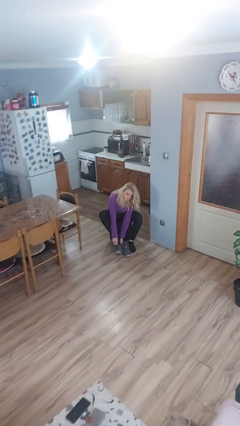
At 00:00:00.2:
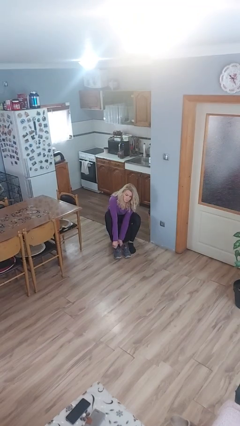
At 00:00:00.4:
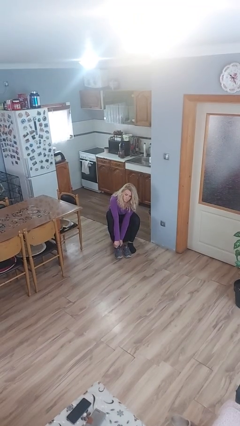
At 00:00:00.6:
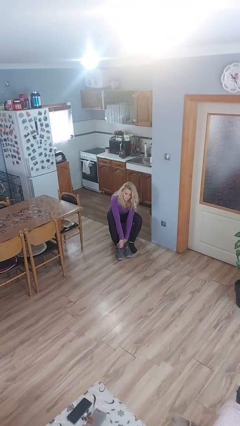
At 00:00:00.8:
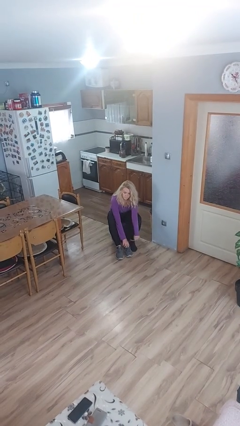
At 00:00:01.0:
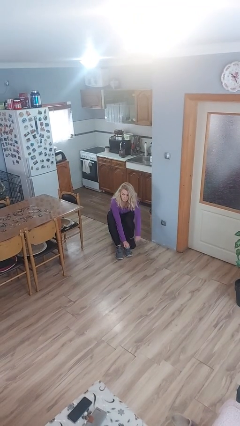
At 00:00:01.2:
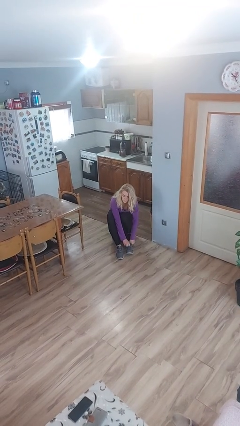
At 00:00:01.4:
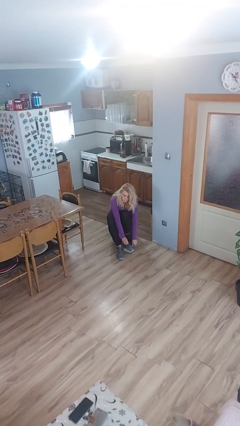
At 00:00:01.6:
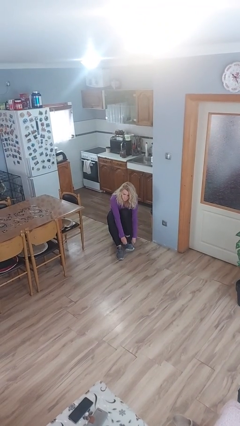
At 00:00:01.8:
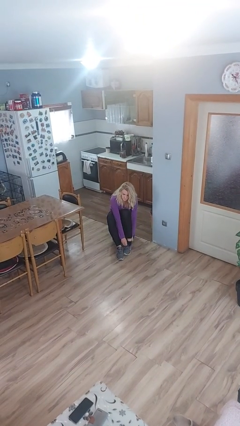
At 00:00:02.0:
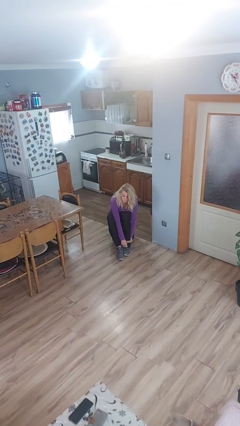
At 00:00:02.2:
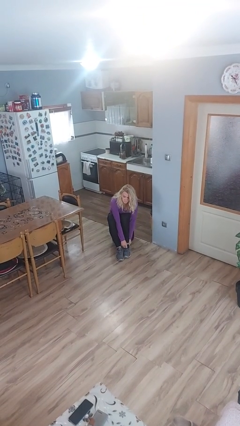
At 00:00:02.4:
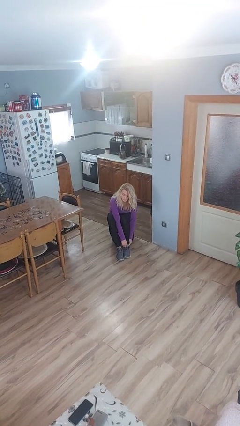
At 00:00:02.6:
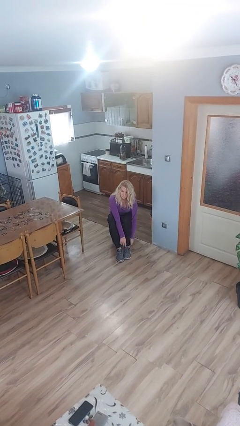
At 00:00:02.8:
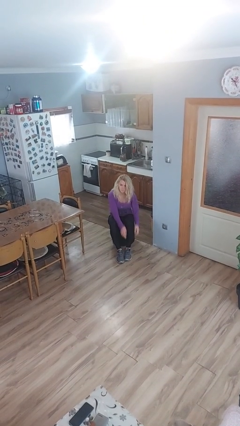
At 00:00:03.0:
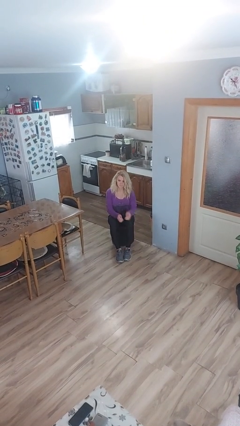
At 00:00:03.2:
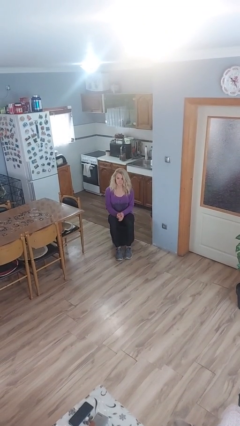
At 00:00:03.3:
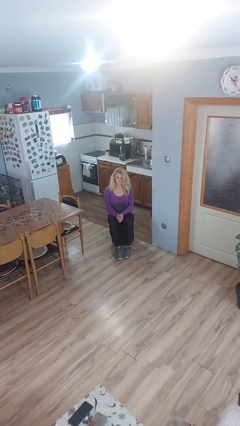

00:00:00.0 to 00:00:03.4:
person puts on shoes

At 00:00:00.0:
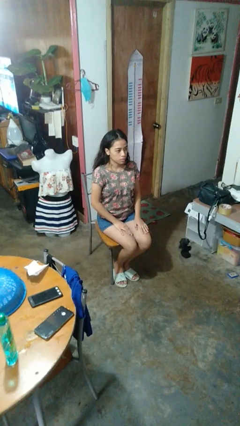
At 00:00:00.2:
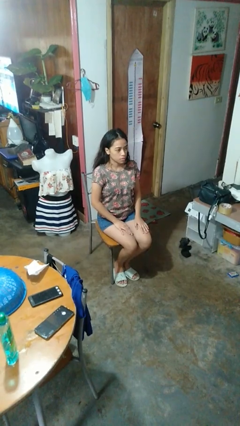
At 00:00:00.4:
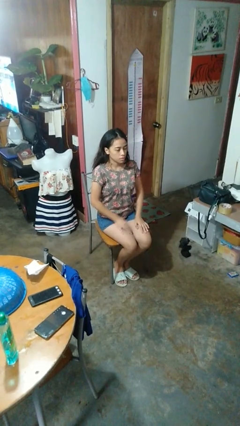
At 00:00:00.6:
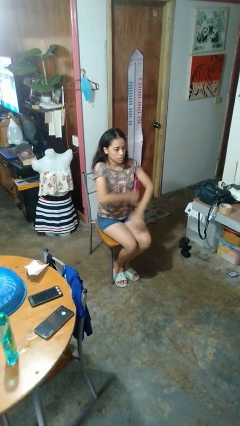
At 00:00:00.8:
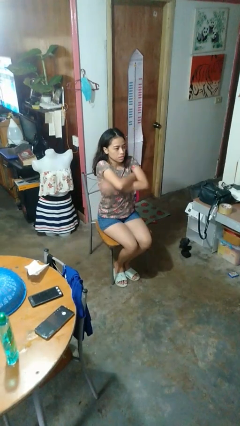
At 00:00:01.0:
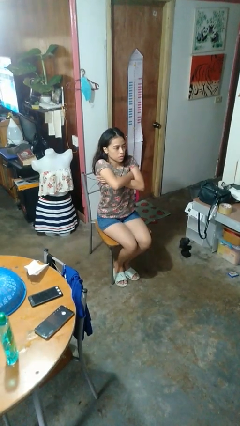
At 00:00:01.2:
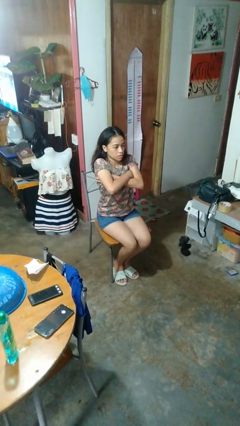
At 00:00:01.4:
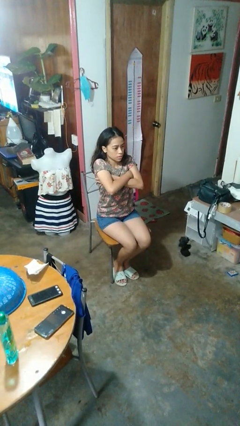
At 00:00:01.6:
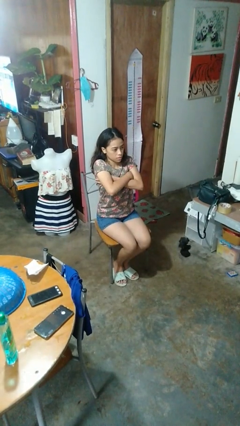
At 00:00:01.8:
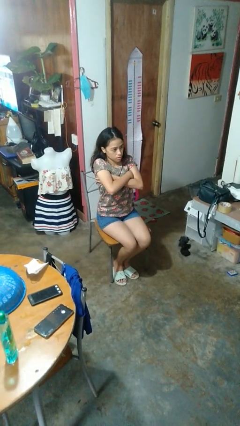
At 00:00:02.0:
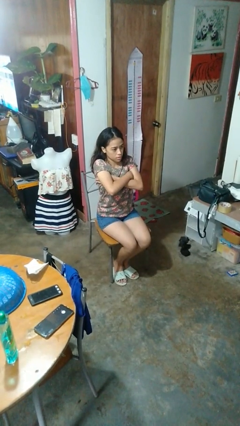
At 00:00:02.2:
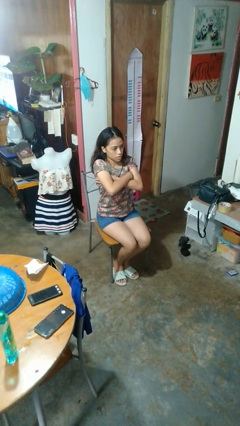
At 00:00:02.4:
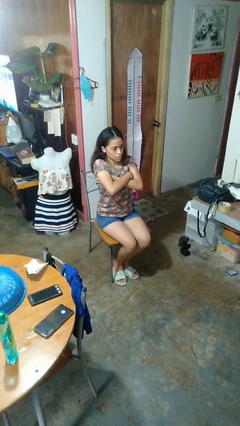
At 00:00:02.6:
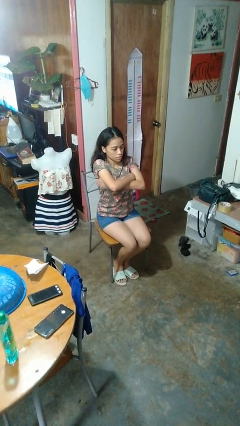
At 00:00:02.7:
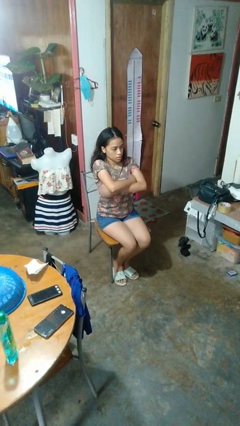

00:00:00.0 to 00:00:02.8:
person crosses arms

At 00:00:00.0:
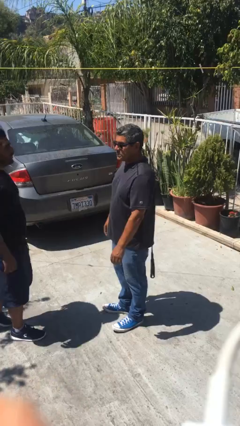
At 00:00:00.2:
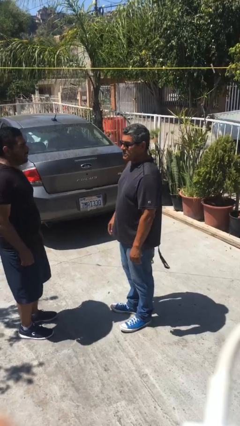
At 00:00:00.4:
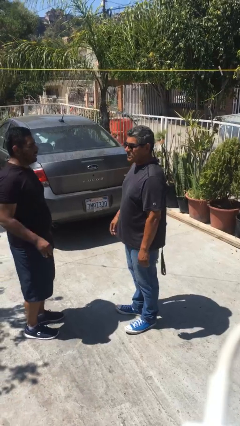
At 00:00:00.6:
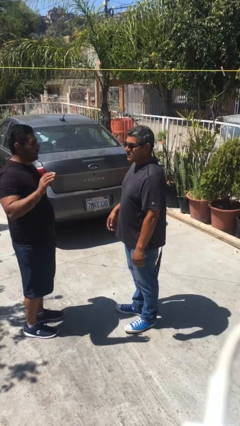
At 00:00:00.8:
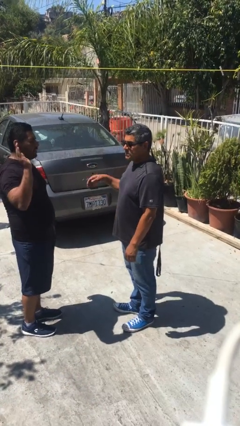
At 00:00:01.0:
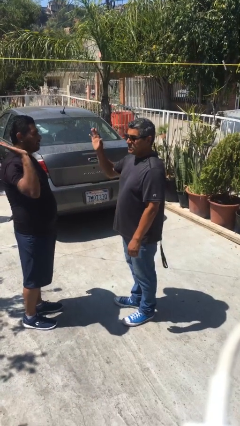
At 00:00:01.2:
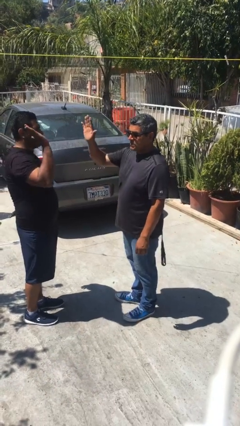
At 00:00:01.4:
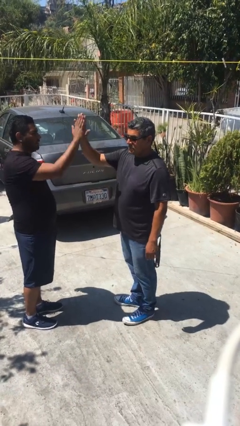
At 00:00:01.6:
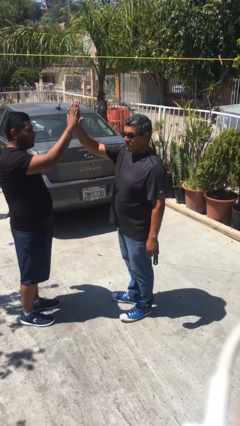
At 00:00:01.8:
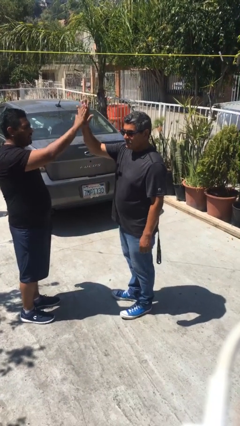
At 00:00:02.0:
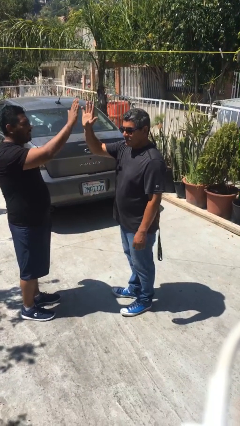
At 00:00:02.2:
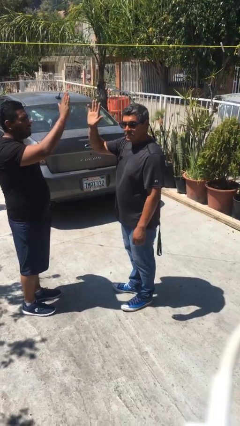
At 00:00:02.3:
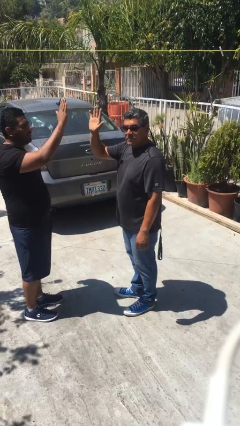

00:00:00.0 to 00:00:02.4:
person highfives hand

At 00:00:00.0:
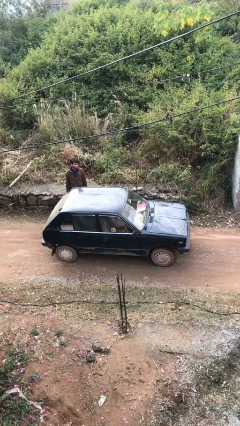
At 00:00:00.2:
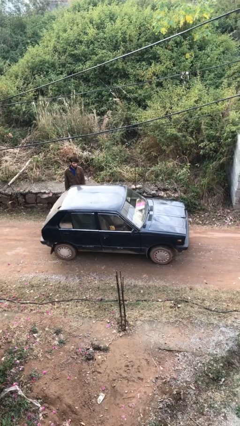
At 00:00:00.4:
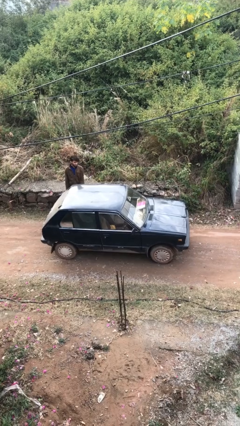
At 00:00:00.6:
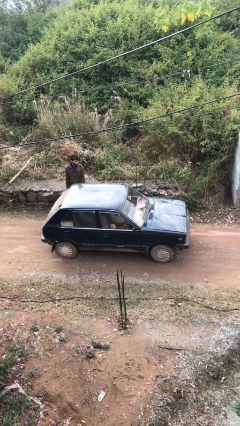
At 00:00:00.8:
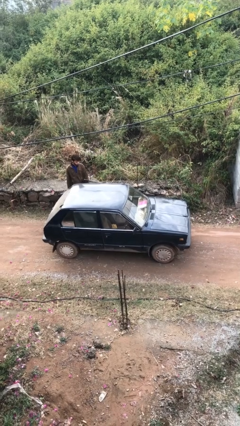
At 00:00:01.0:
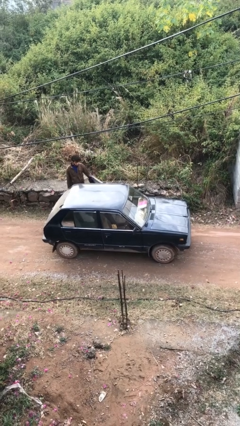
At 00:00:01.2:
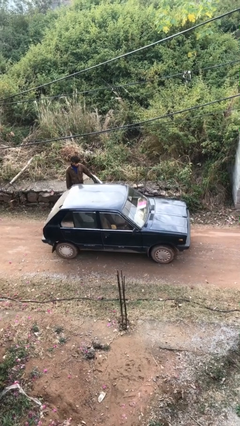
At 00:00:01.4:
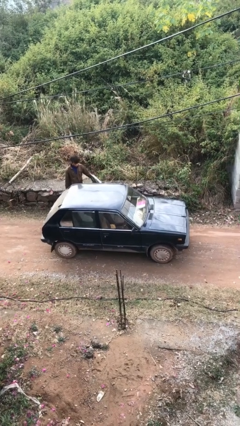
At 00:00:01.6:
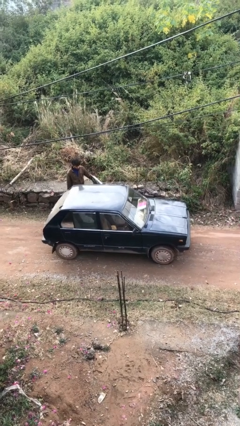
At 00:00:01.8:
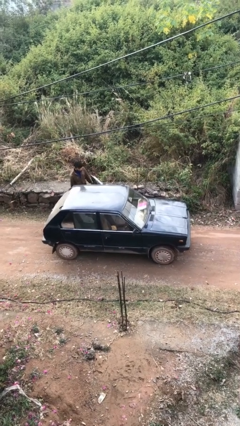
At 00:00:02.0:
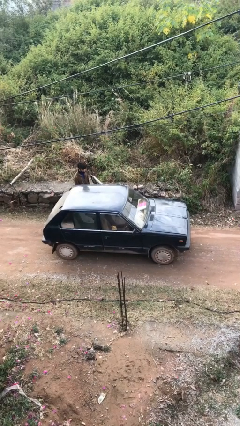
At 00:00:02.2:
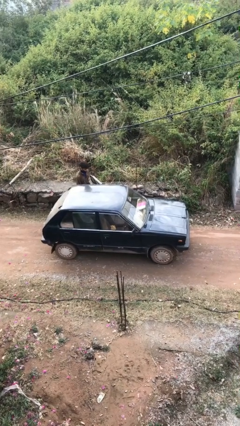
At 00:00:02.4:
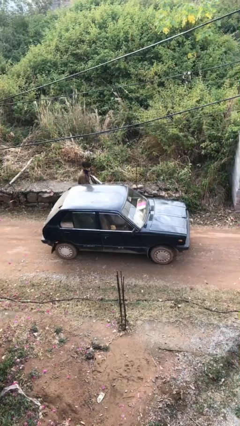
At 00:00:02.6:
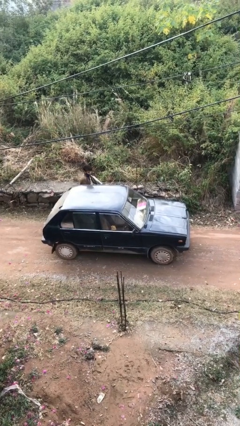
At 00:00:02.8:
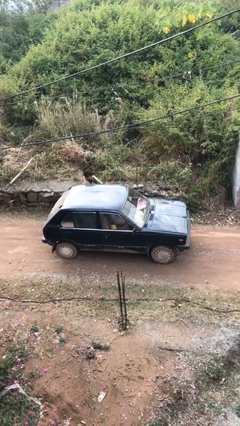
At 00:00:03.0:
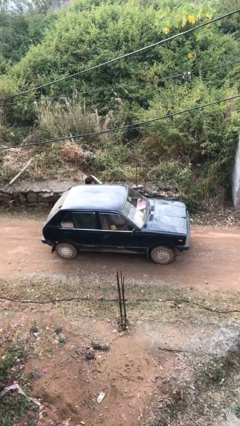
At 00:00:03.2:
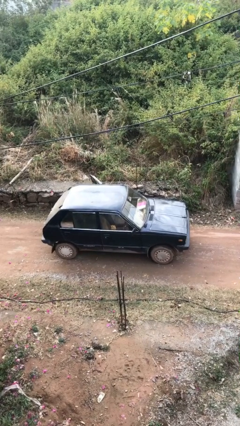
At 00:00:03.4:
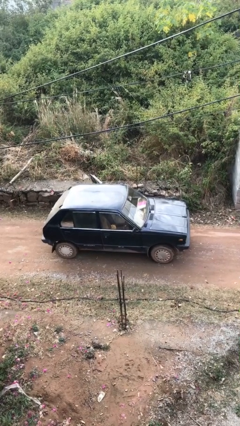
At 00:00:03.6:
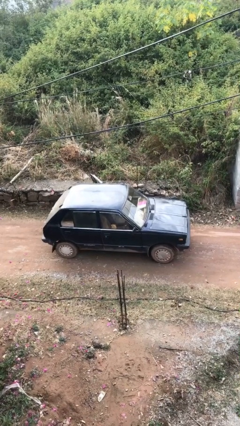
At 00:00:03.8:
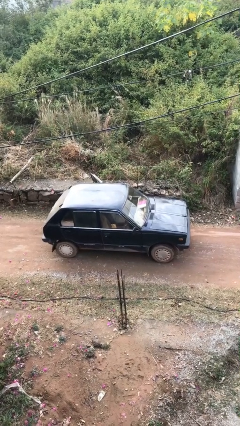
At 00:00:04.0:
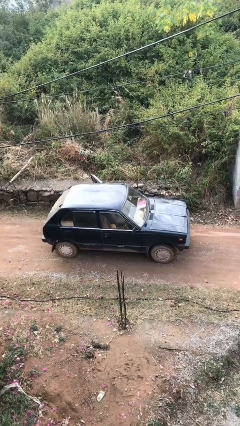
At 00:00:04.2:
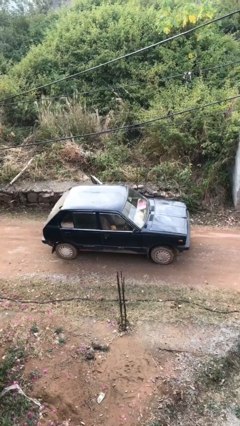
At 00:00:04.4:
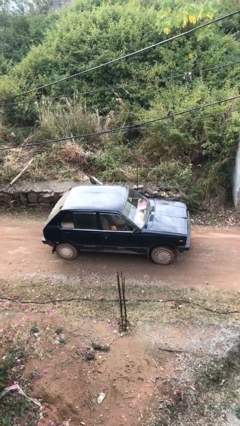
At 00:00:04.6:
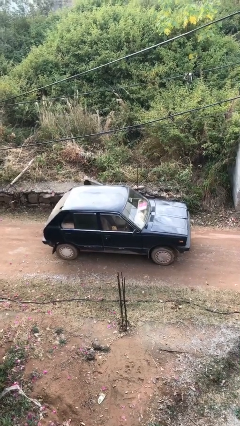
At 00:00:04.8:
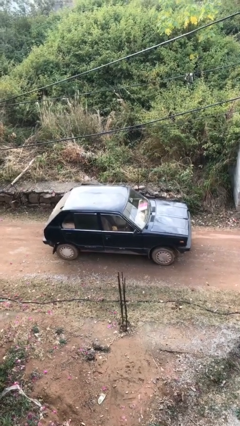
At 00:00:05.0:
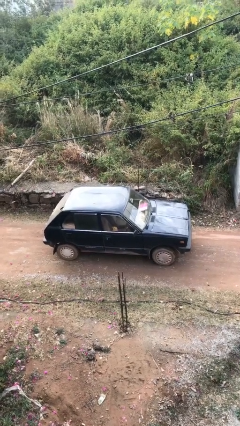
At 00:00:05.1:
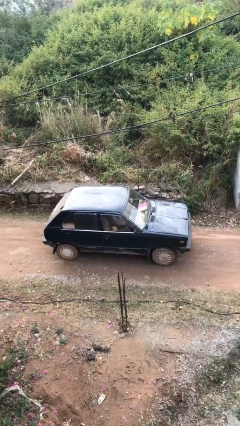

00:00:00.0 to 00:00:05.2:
car picks up person

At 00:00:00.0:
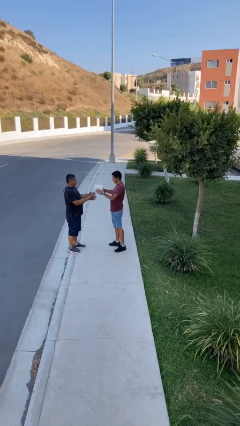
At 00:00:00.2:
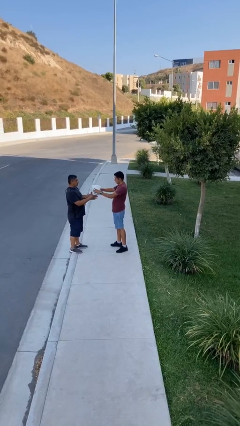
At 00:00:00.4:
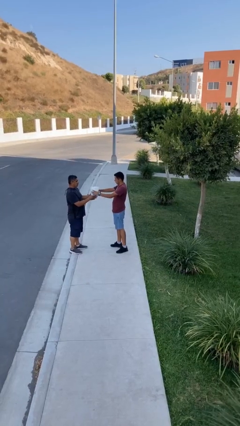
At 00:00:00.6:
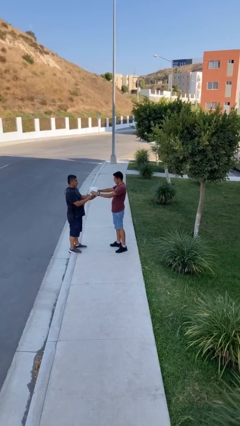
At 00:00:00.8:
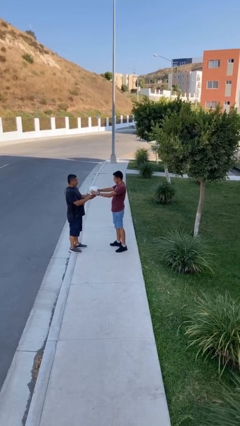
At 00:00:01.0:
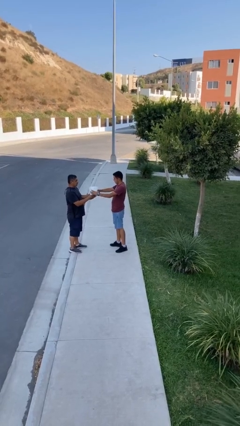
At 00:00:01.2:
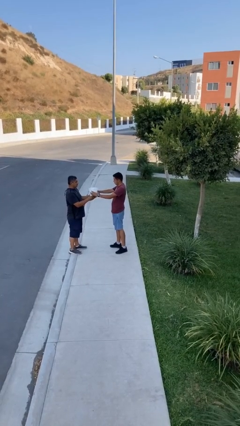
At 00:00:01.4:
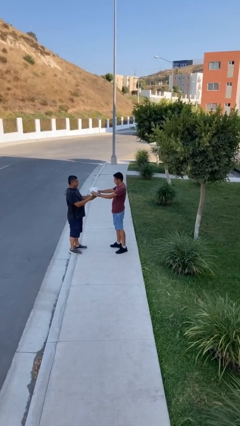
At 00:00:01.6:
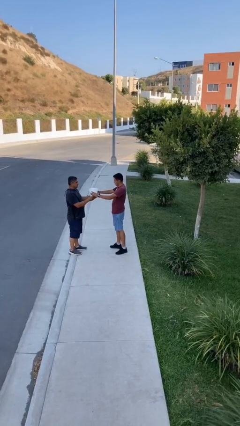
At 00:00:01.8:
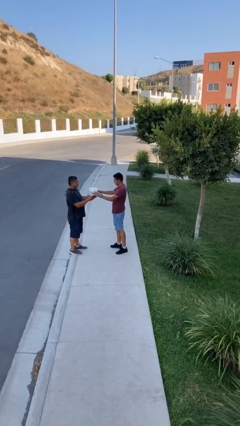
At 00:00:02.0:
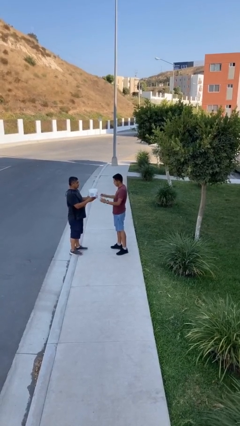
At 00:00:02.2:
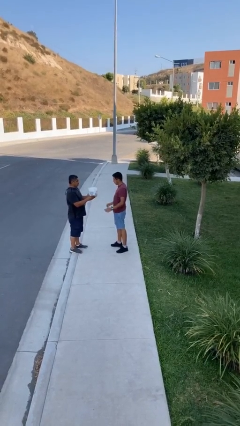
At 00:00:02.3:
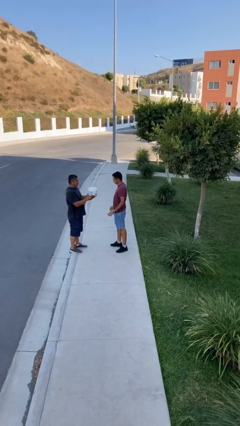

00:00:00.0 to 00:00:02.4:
person transfers object to person

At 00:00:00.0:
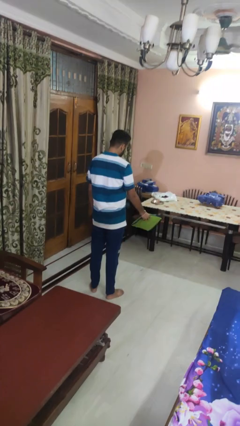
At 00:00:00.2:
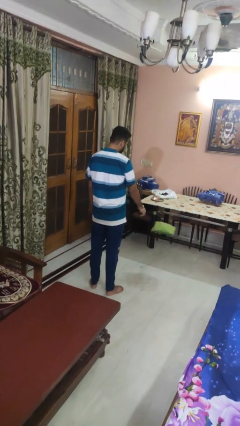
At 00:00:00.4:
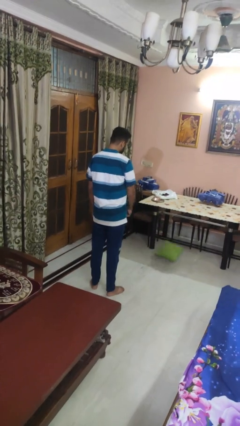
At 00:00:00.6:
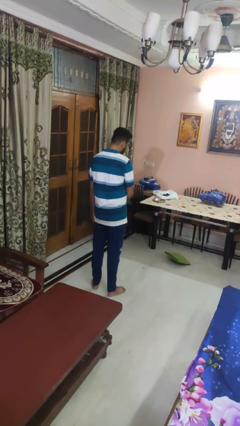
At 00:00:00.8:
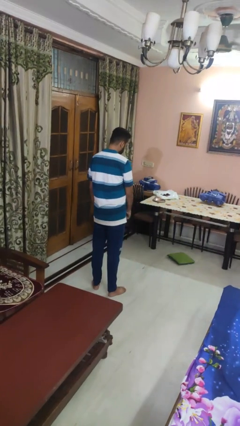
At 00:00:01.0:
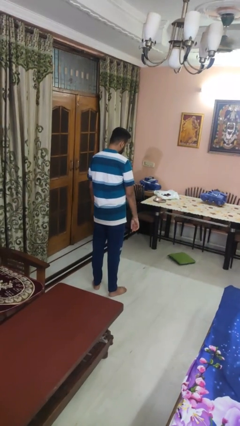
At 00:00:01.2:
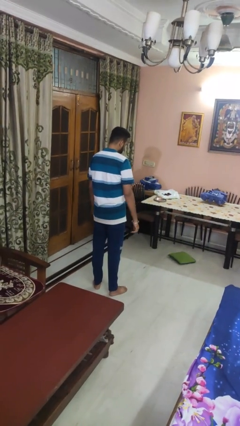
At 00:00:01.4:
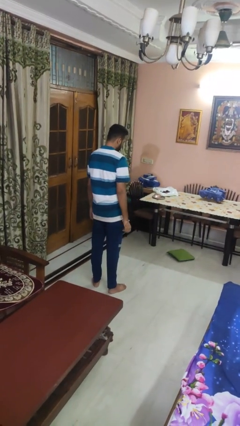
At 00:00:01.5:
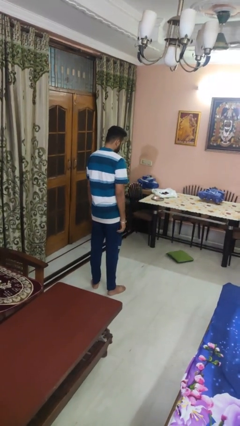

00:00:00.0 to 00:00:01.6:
person throws object to ground
